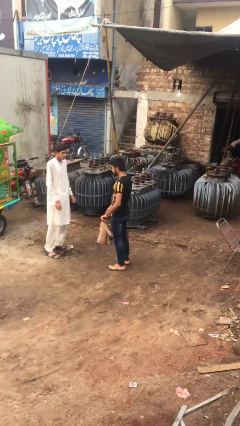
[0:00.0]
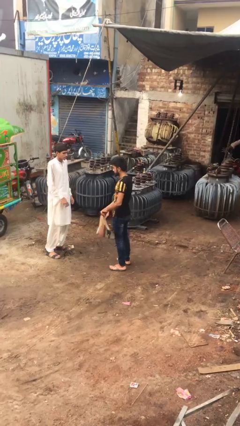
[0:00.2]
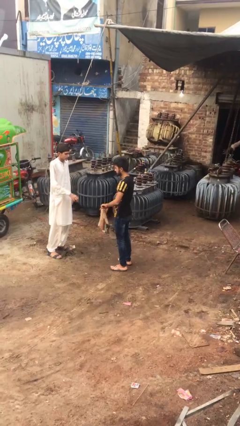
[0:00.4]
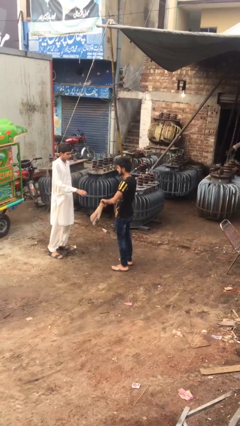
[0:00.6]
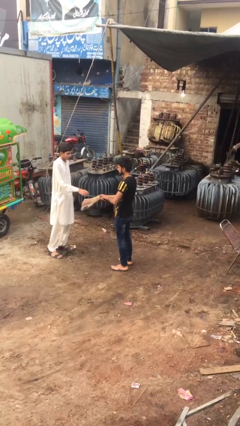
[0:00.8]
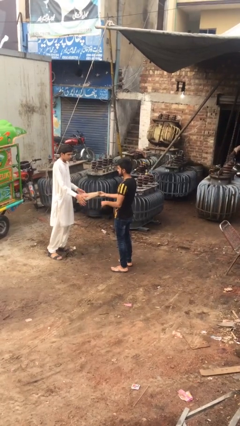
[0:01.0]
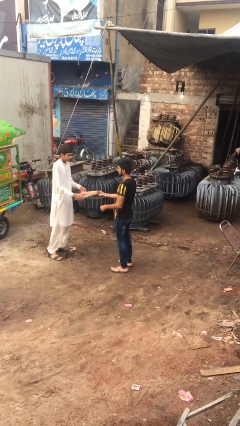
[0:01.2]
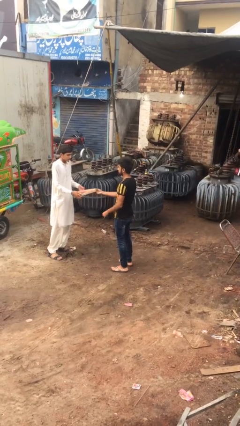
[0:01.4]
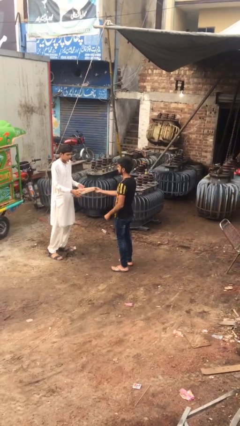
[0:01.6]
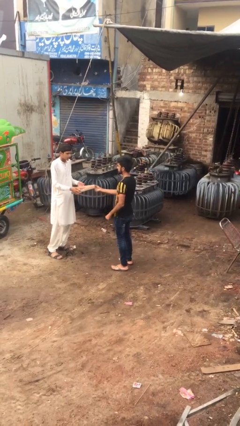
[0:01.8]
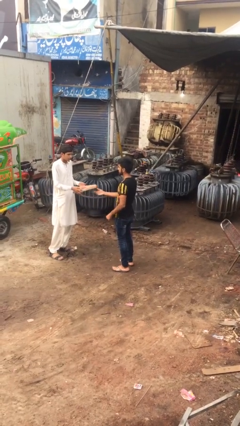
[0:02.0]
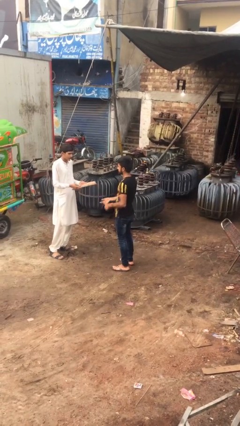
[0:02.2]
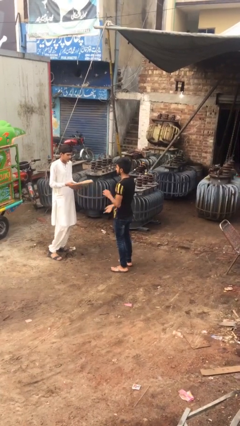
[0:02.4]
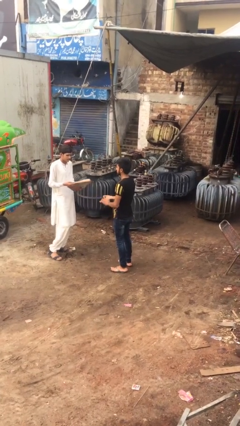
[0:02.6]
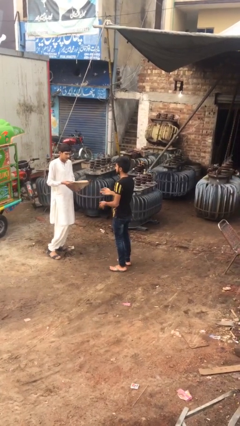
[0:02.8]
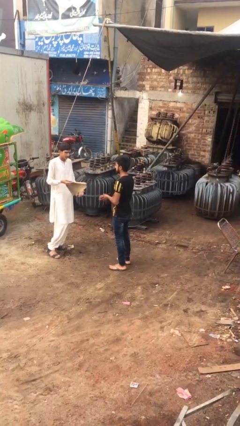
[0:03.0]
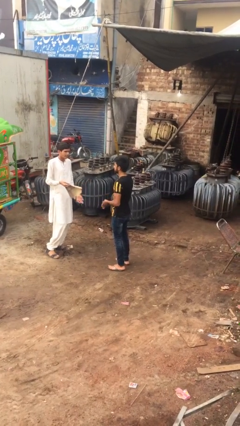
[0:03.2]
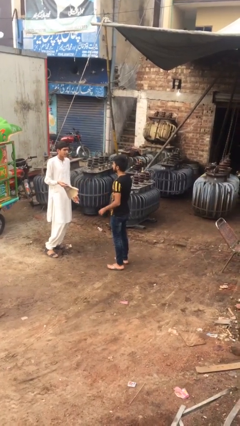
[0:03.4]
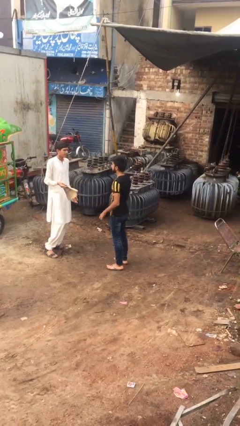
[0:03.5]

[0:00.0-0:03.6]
person transfers object to person

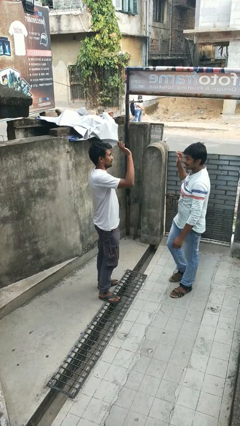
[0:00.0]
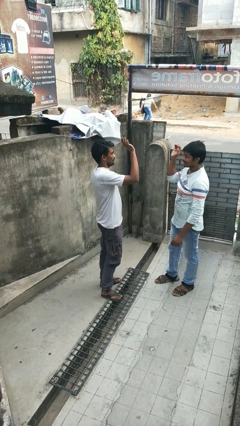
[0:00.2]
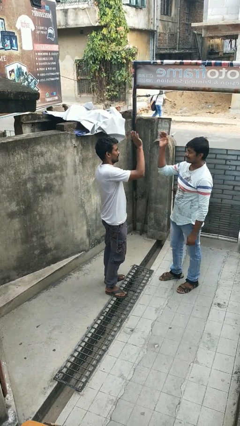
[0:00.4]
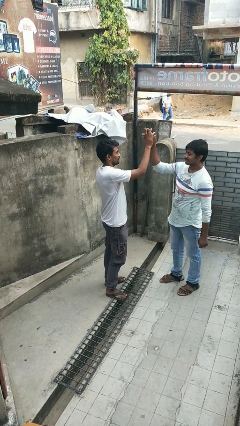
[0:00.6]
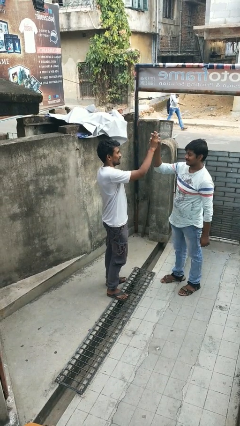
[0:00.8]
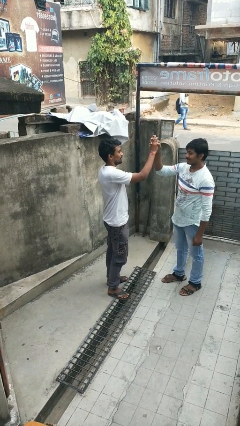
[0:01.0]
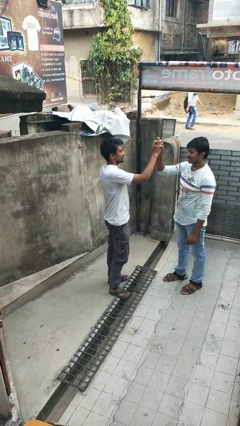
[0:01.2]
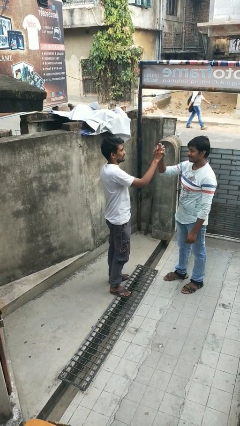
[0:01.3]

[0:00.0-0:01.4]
person highfives hand

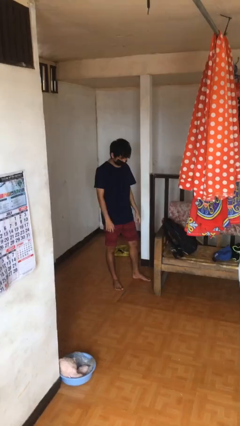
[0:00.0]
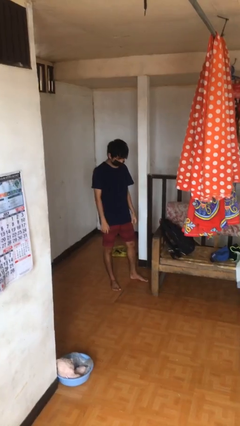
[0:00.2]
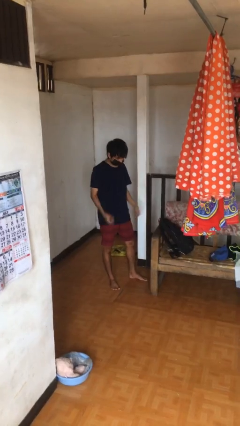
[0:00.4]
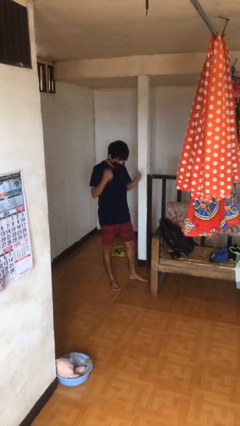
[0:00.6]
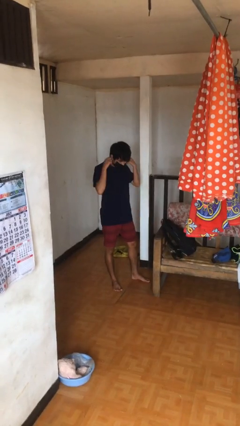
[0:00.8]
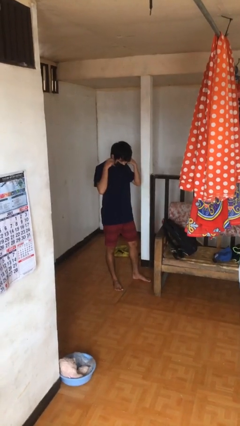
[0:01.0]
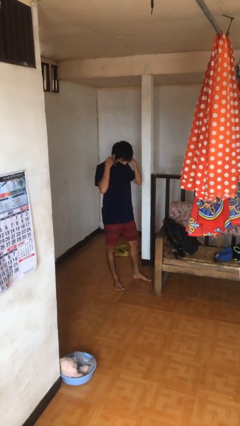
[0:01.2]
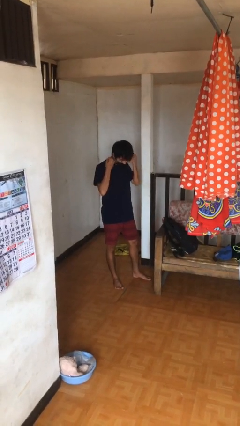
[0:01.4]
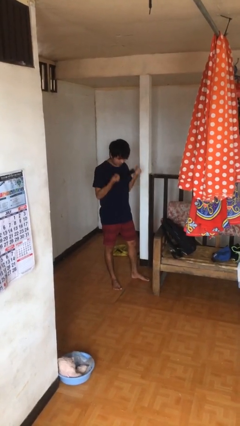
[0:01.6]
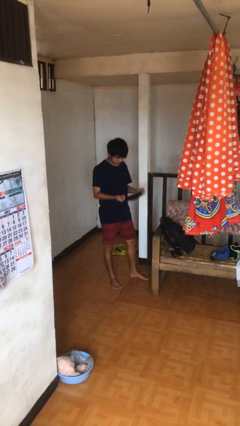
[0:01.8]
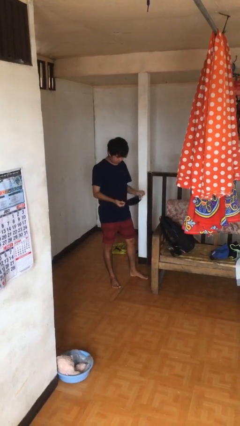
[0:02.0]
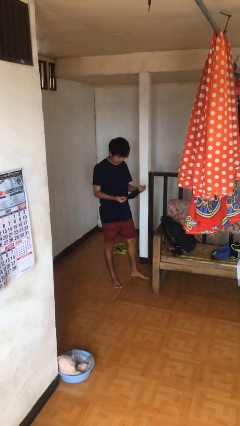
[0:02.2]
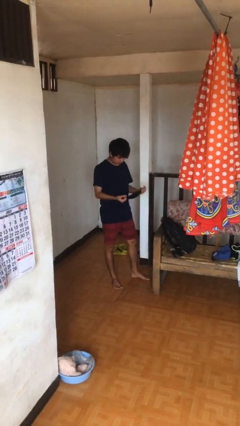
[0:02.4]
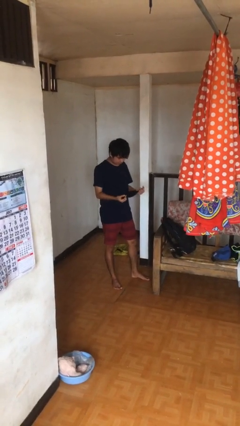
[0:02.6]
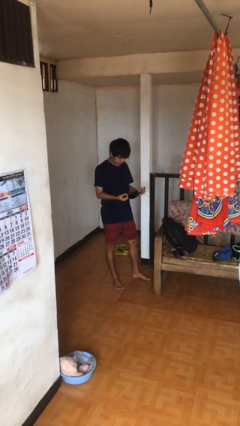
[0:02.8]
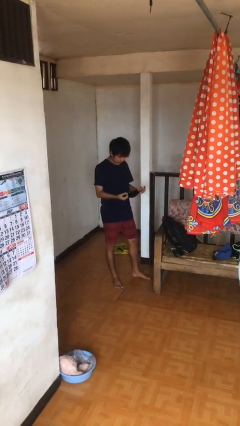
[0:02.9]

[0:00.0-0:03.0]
person takes off facemask

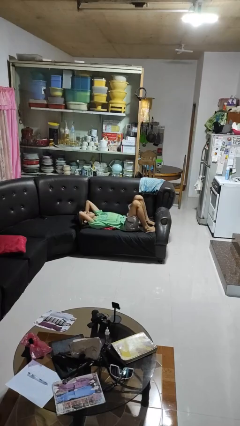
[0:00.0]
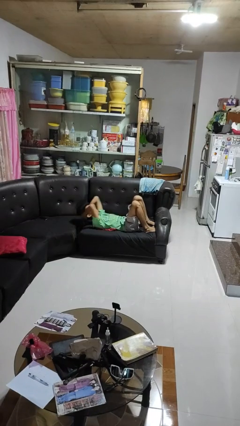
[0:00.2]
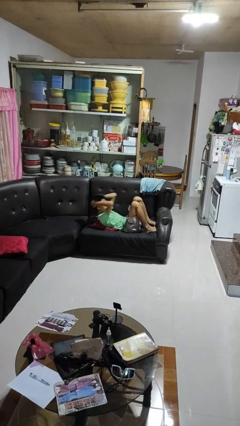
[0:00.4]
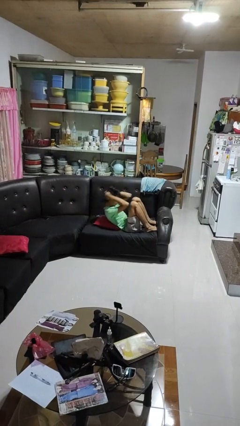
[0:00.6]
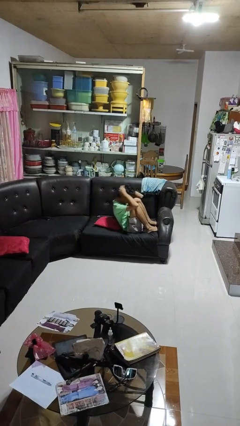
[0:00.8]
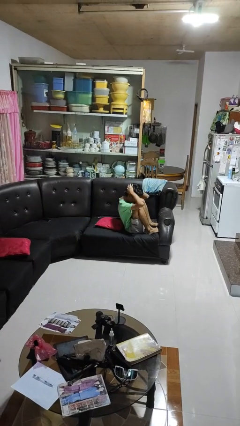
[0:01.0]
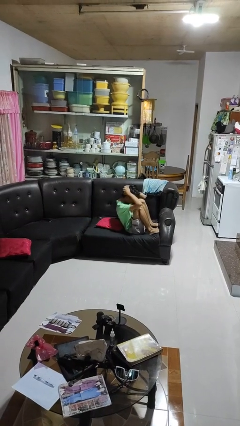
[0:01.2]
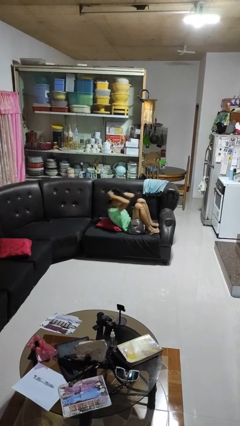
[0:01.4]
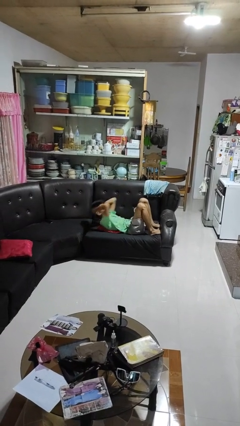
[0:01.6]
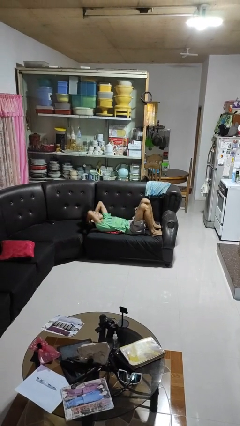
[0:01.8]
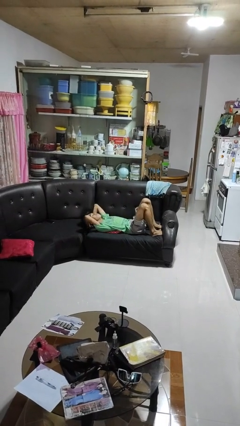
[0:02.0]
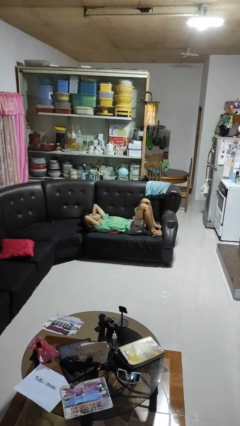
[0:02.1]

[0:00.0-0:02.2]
person exercises with situp

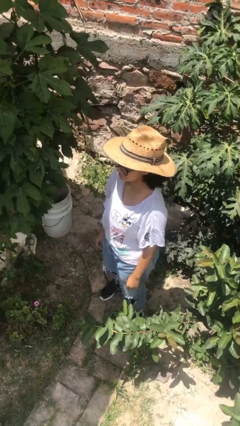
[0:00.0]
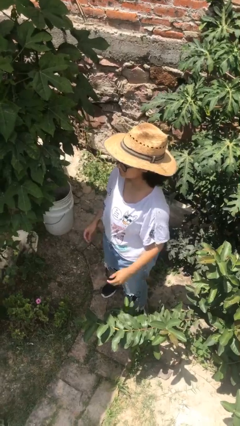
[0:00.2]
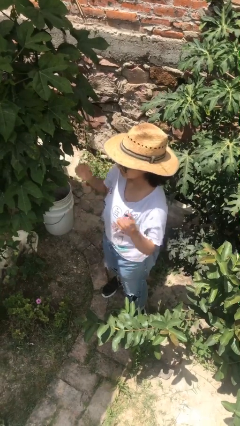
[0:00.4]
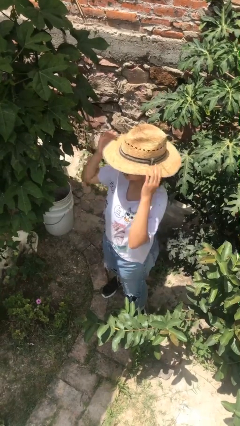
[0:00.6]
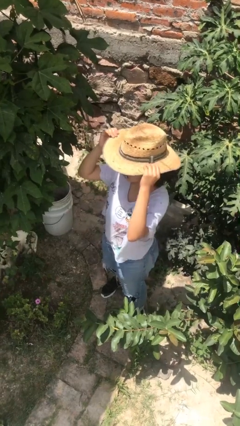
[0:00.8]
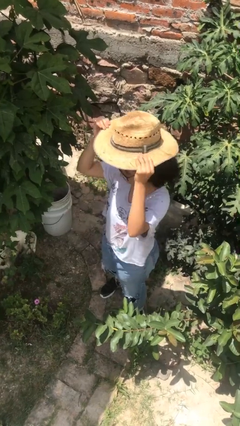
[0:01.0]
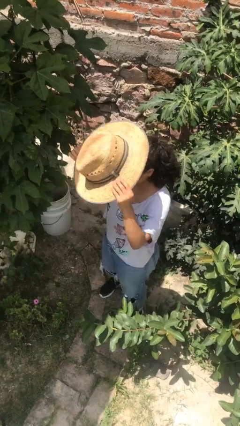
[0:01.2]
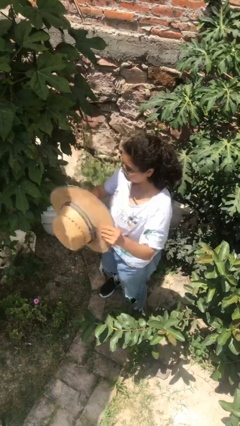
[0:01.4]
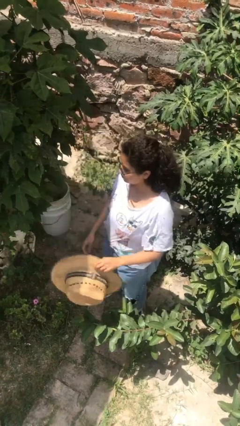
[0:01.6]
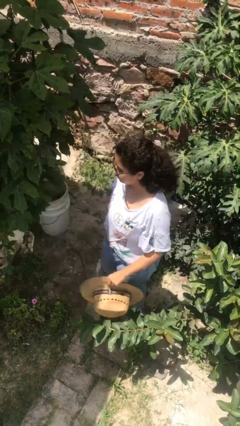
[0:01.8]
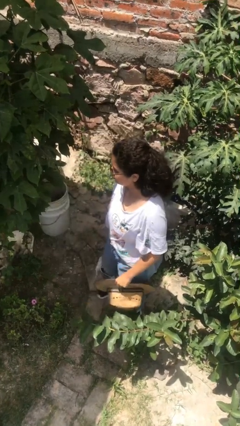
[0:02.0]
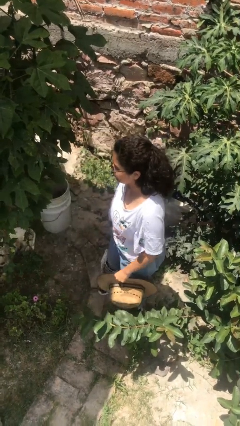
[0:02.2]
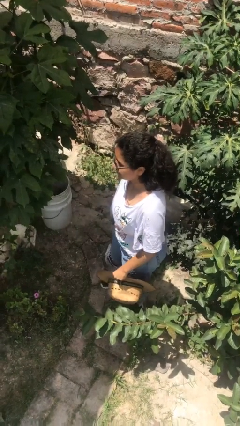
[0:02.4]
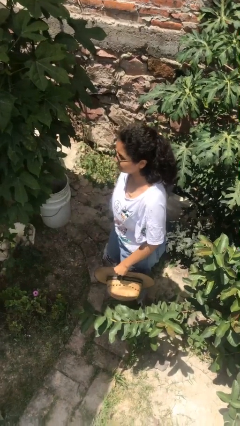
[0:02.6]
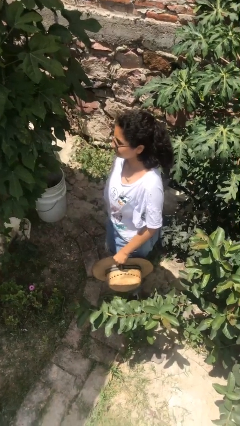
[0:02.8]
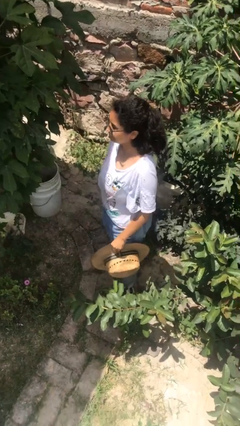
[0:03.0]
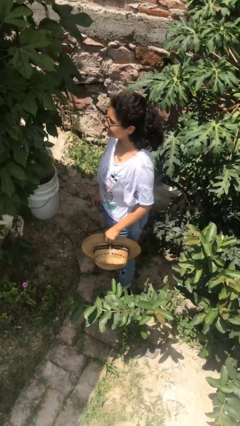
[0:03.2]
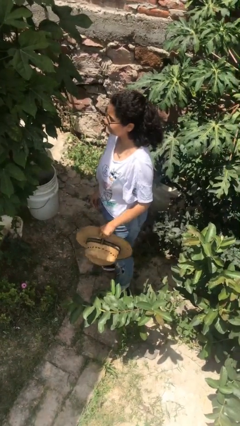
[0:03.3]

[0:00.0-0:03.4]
person takes off hat

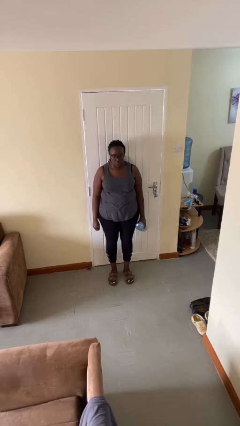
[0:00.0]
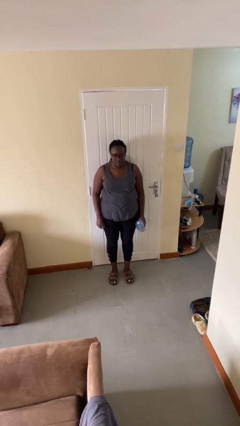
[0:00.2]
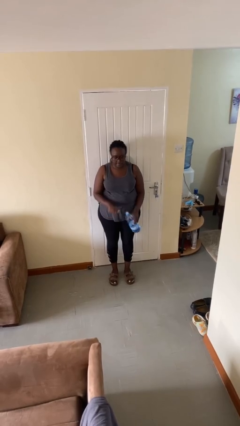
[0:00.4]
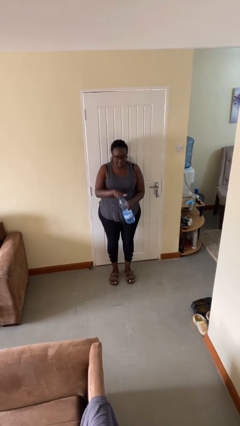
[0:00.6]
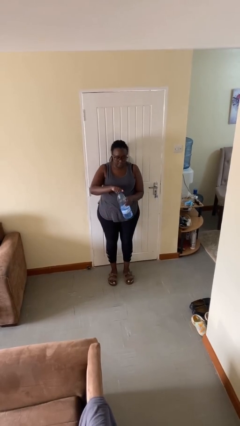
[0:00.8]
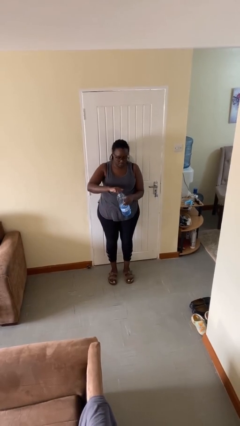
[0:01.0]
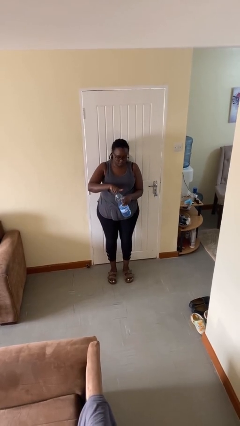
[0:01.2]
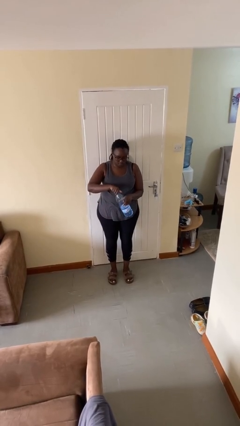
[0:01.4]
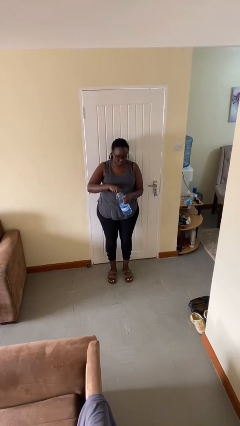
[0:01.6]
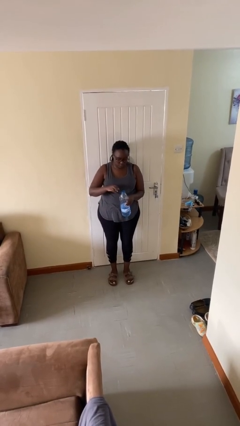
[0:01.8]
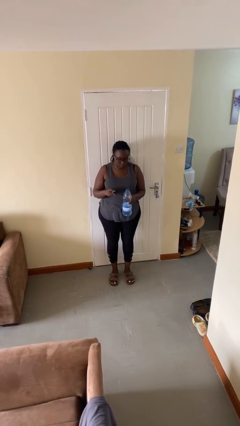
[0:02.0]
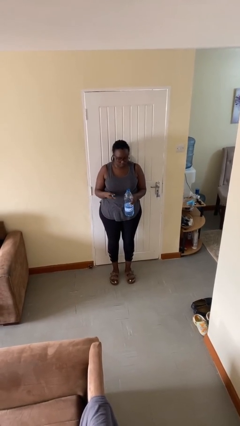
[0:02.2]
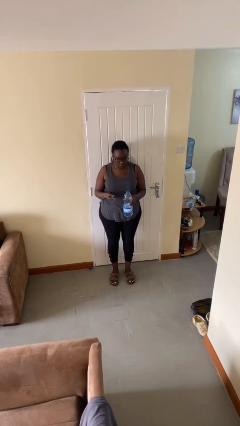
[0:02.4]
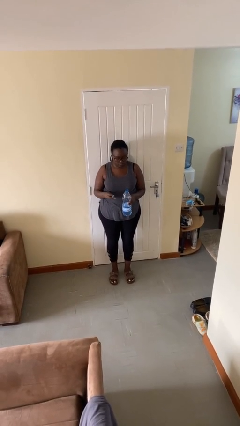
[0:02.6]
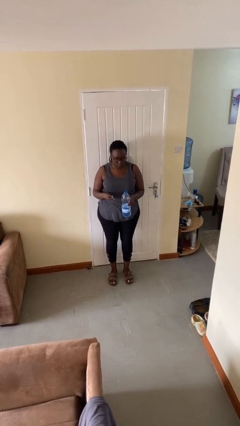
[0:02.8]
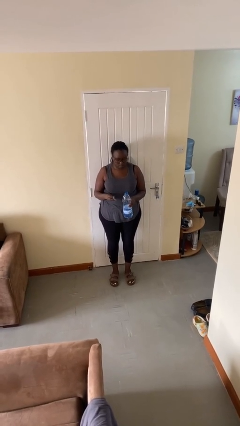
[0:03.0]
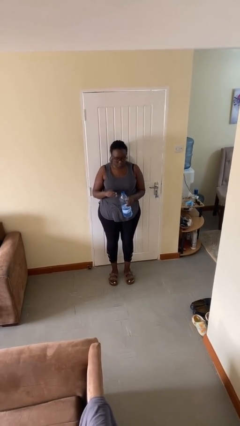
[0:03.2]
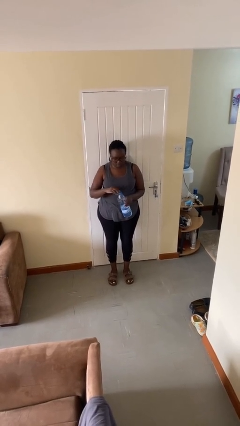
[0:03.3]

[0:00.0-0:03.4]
person unscrews lid from bottle
